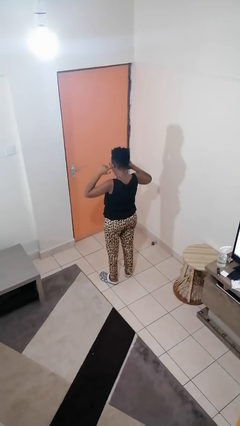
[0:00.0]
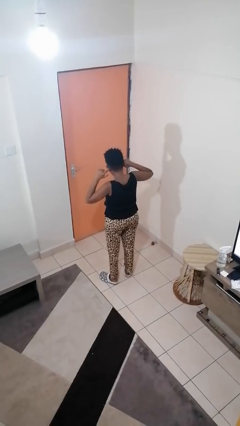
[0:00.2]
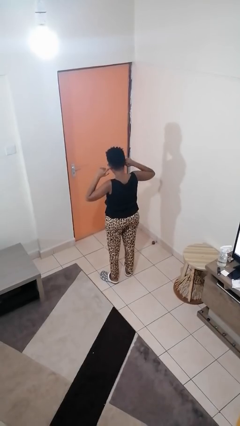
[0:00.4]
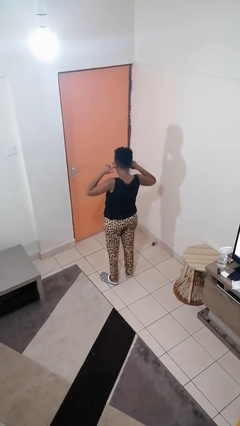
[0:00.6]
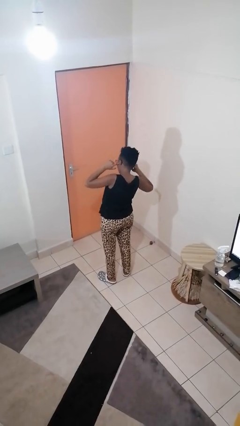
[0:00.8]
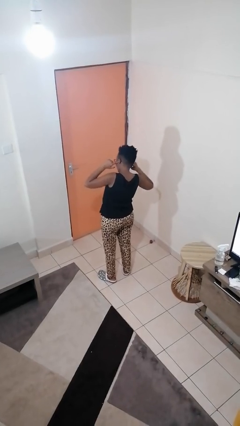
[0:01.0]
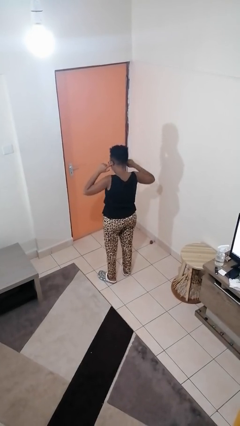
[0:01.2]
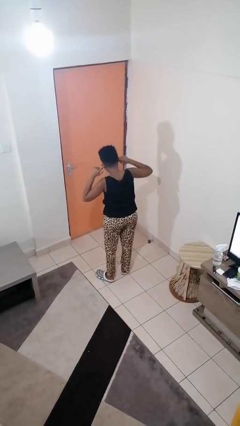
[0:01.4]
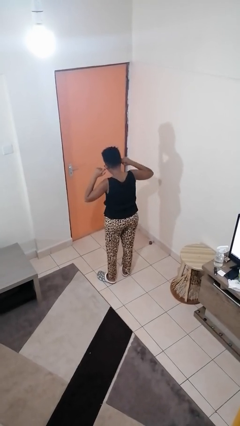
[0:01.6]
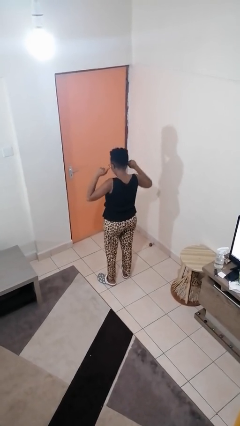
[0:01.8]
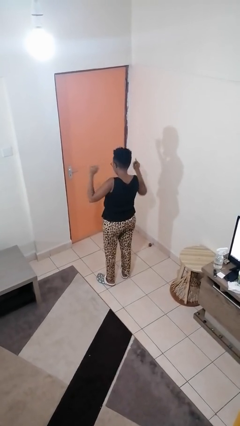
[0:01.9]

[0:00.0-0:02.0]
person puts fingers in ear

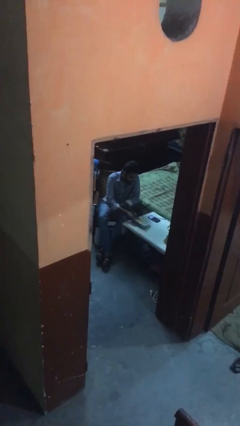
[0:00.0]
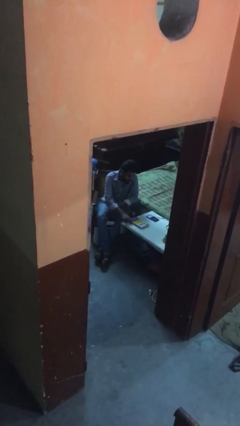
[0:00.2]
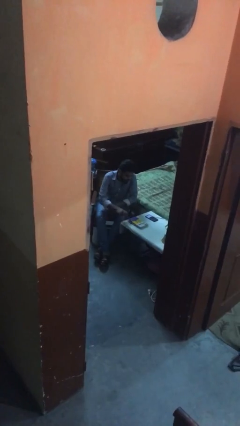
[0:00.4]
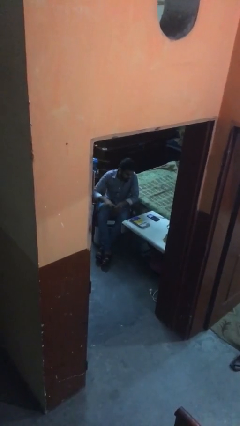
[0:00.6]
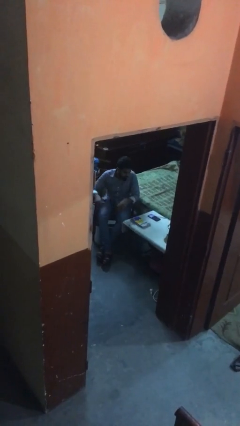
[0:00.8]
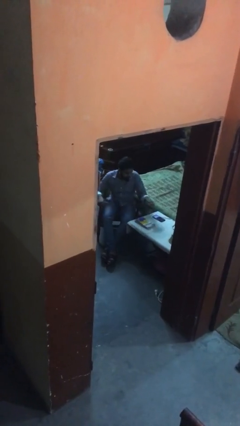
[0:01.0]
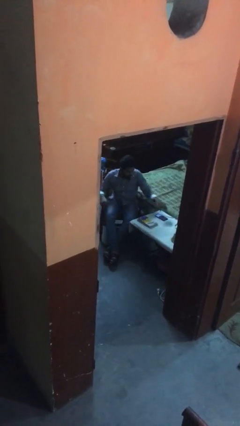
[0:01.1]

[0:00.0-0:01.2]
person puts down object on table

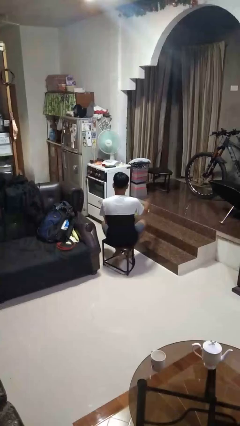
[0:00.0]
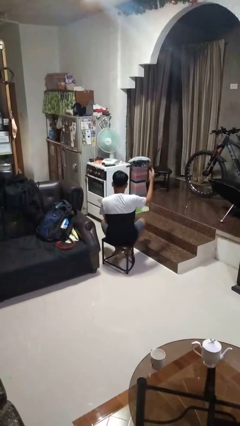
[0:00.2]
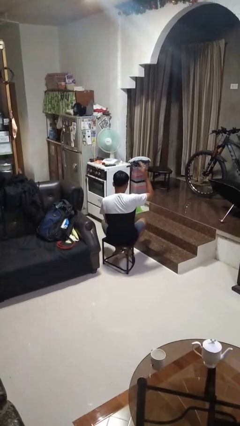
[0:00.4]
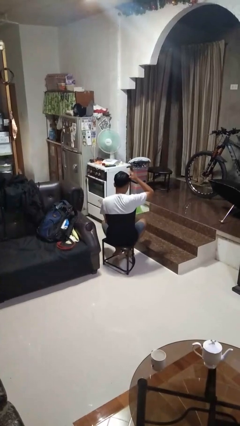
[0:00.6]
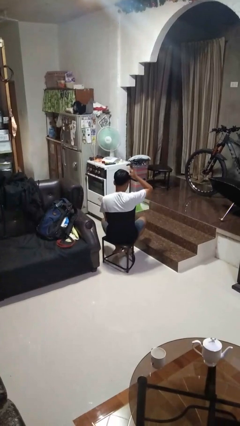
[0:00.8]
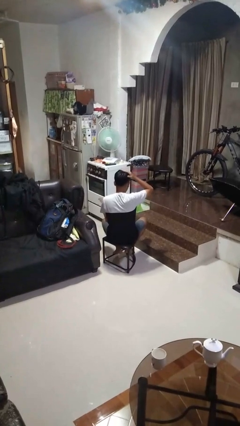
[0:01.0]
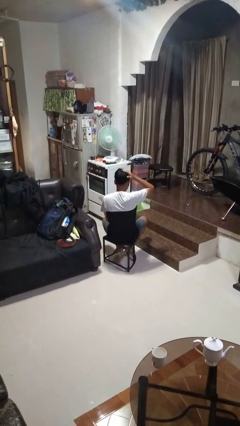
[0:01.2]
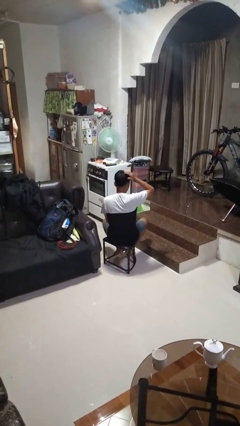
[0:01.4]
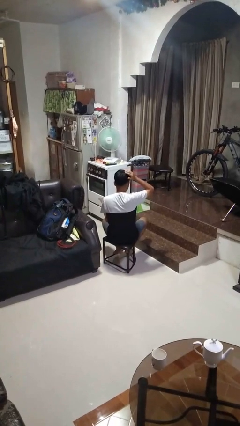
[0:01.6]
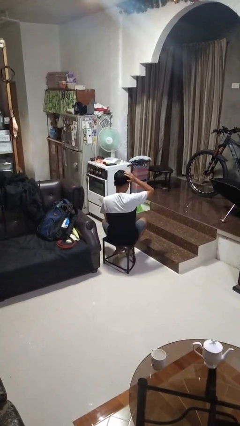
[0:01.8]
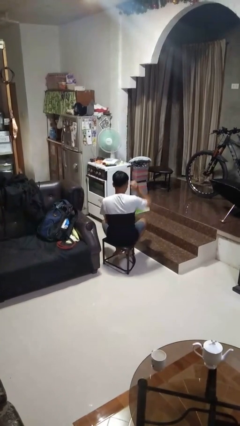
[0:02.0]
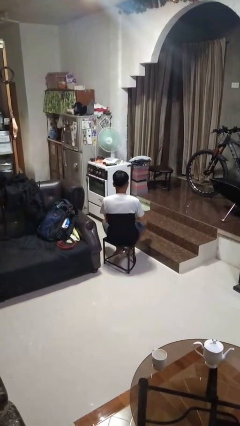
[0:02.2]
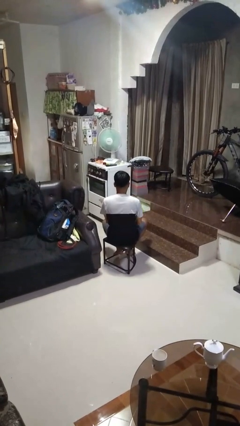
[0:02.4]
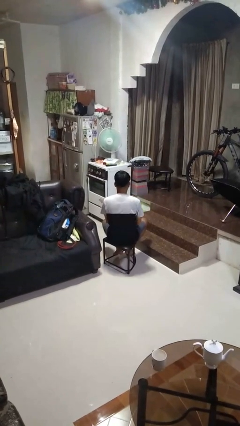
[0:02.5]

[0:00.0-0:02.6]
person pats head

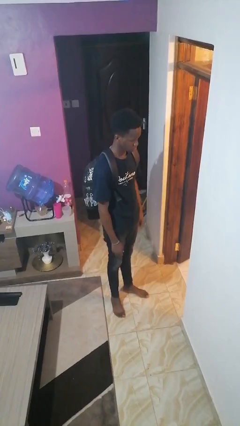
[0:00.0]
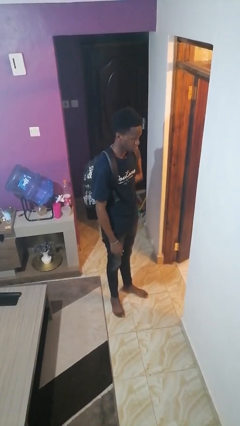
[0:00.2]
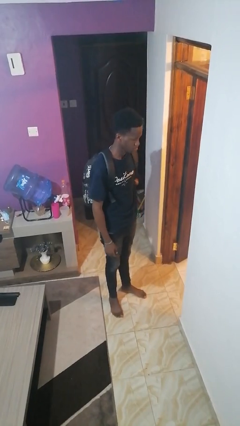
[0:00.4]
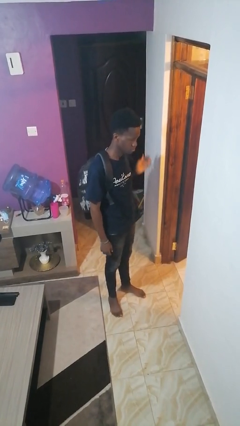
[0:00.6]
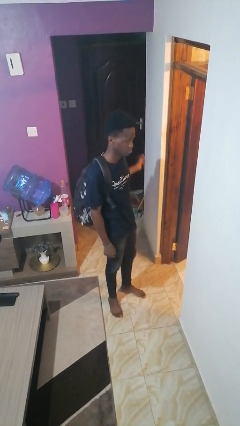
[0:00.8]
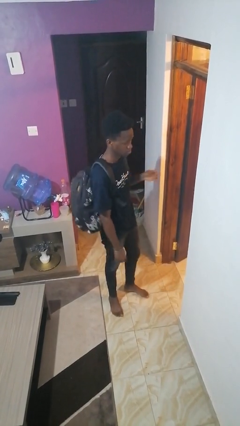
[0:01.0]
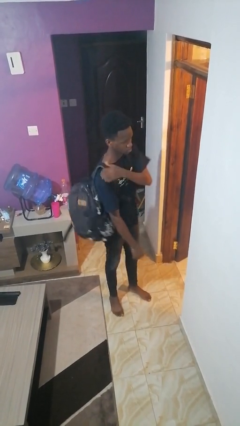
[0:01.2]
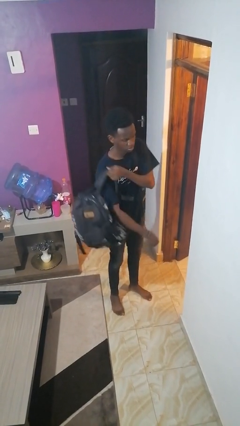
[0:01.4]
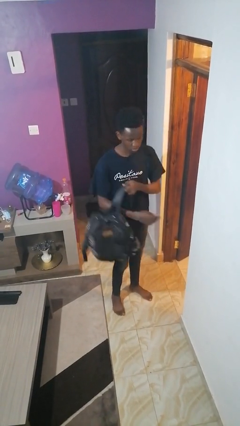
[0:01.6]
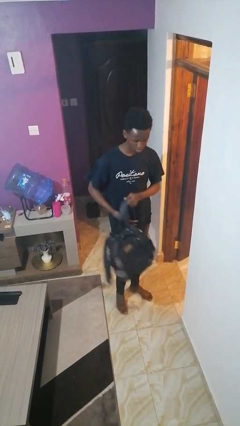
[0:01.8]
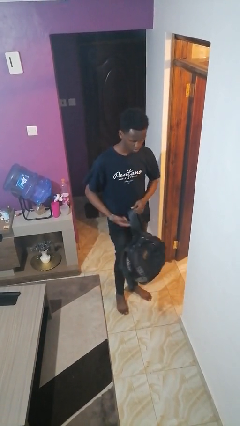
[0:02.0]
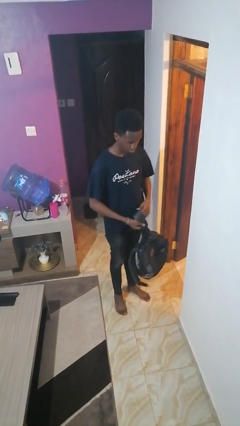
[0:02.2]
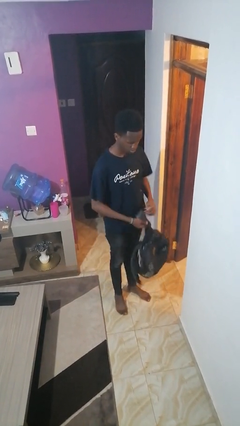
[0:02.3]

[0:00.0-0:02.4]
person takes off backpack

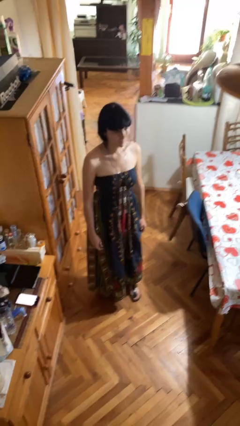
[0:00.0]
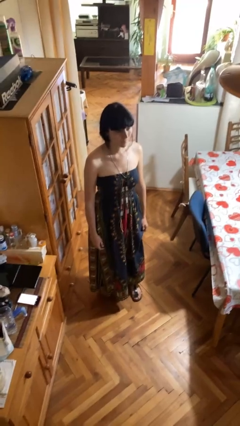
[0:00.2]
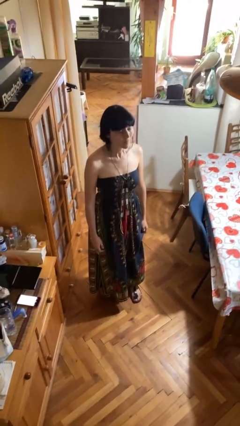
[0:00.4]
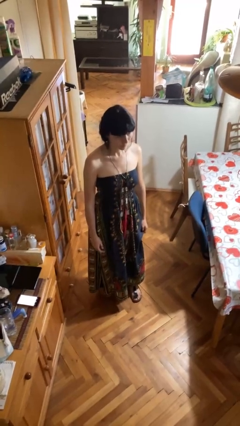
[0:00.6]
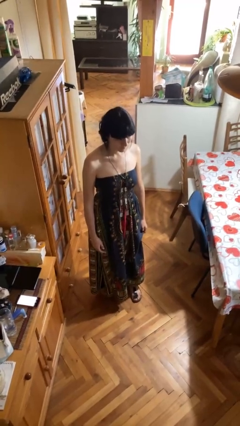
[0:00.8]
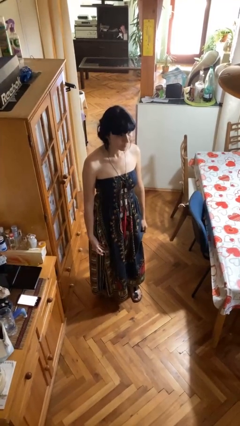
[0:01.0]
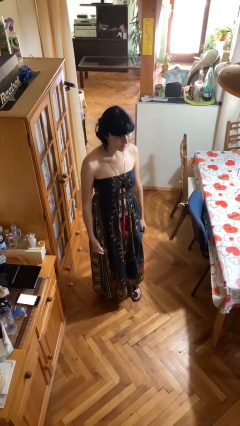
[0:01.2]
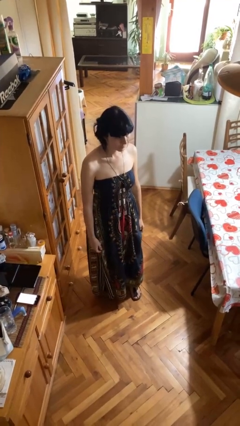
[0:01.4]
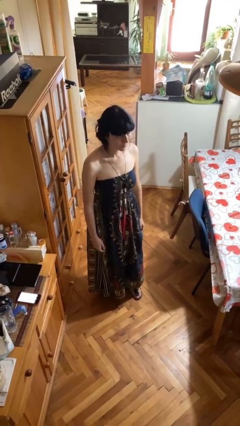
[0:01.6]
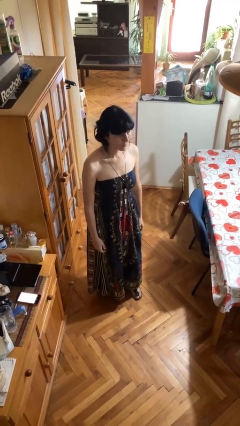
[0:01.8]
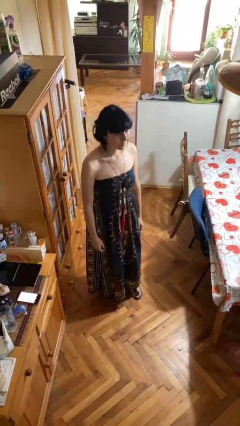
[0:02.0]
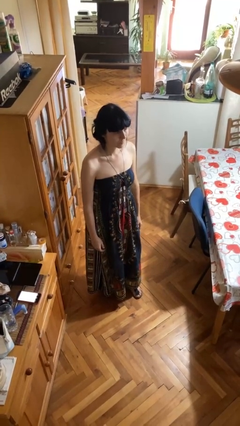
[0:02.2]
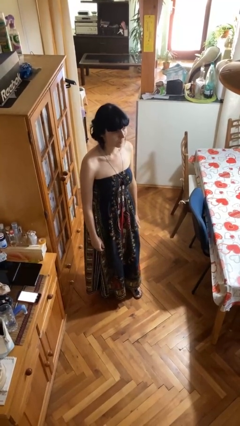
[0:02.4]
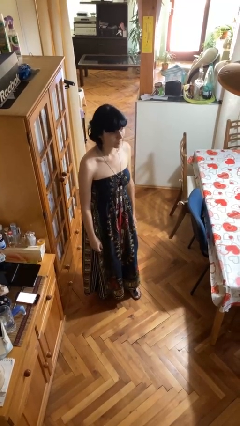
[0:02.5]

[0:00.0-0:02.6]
person nods head

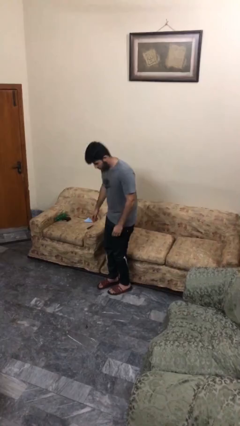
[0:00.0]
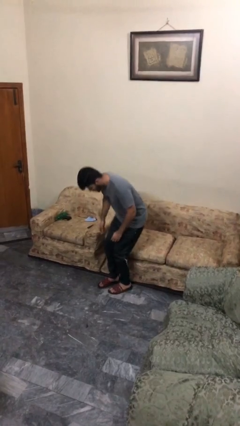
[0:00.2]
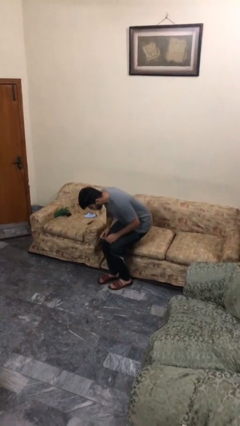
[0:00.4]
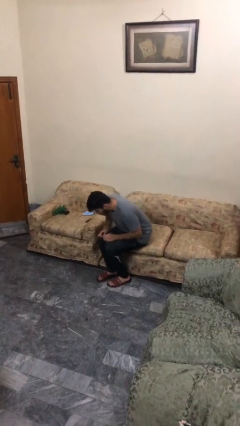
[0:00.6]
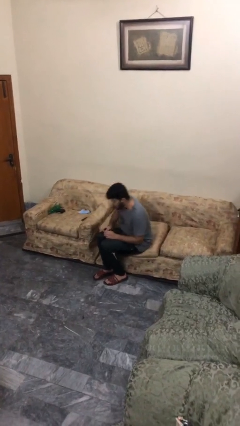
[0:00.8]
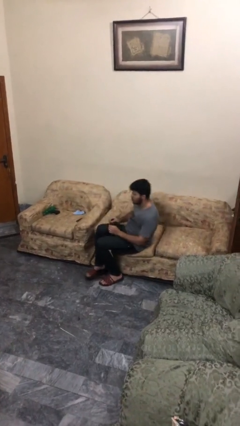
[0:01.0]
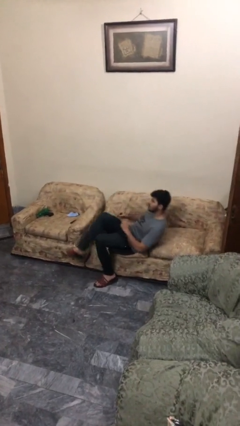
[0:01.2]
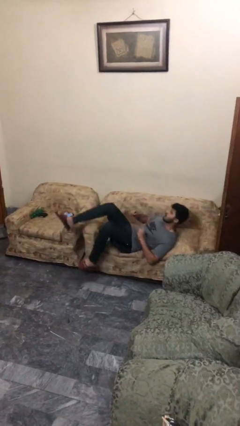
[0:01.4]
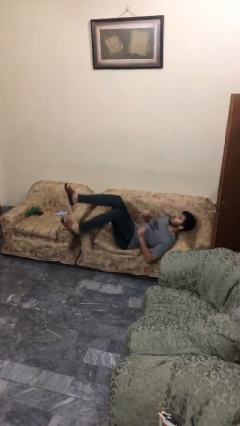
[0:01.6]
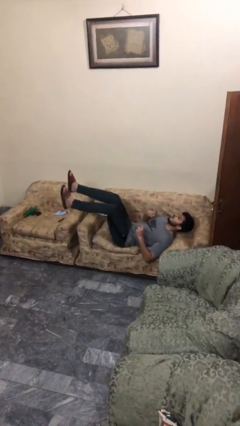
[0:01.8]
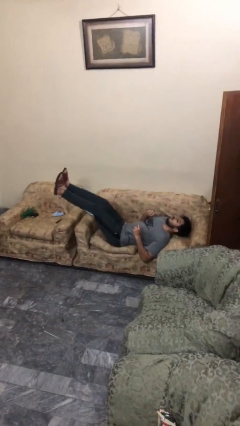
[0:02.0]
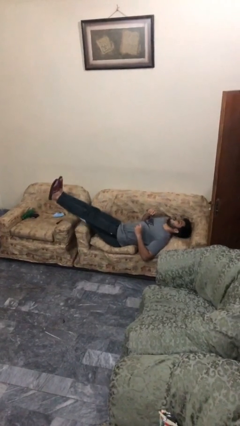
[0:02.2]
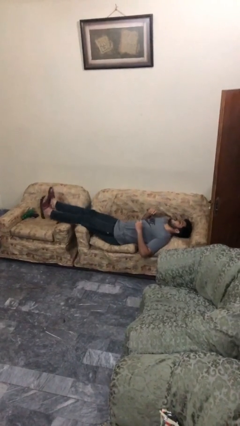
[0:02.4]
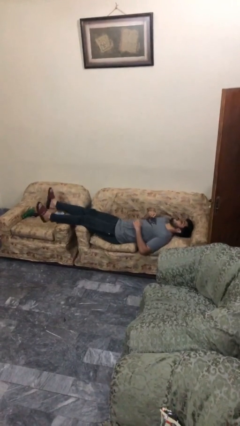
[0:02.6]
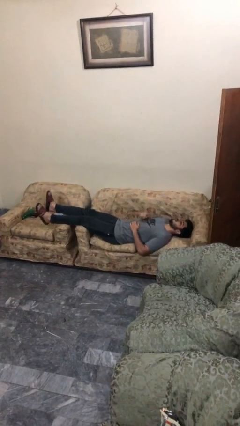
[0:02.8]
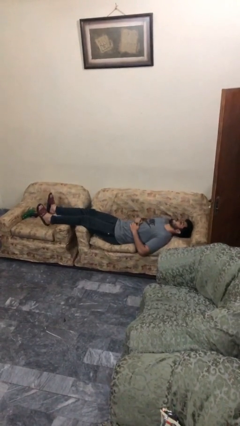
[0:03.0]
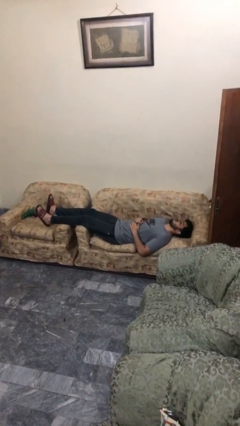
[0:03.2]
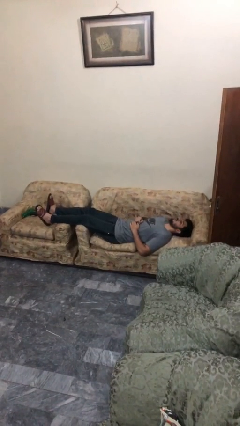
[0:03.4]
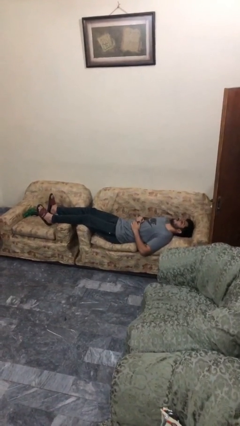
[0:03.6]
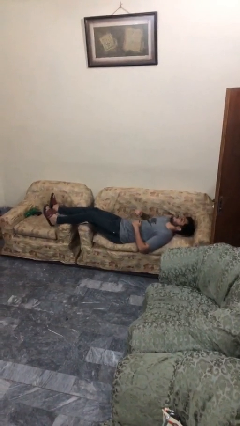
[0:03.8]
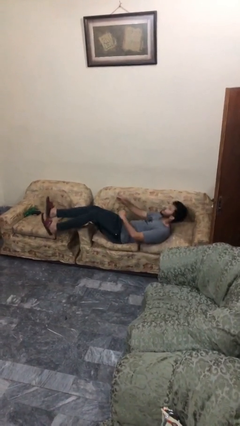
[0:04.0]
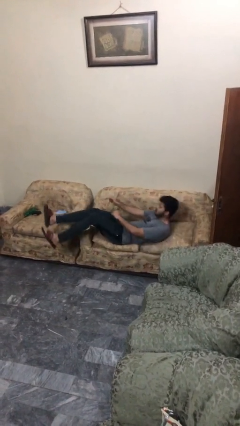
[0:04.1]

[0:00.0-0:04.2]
person lies down on couch

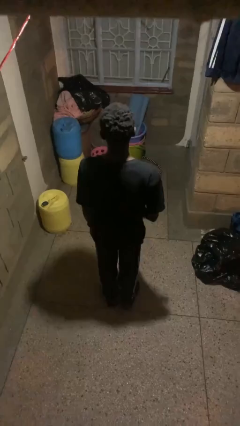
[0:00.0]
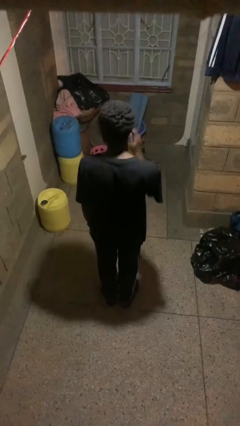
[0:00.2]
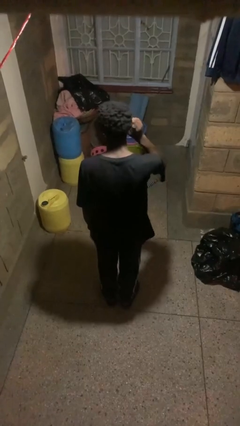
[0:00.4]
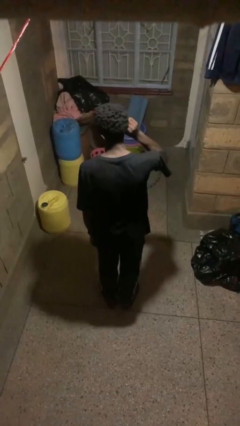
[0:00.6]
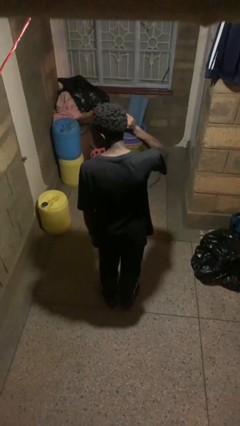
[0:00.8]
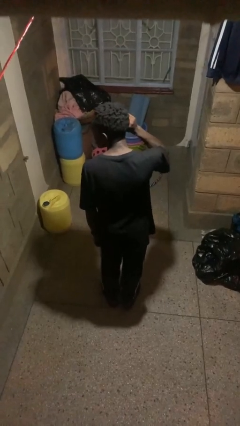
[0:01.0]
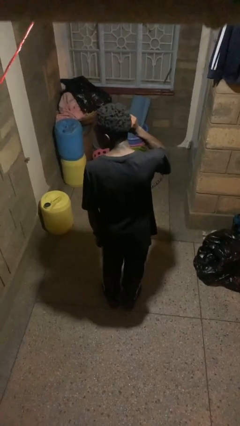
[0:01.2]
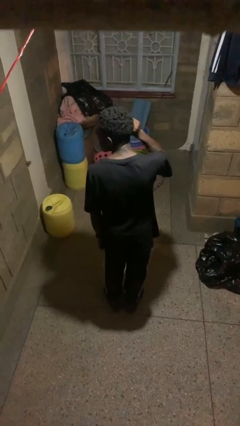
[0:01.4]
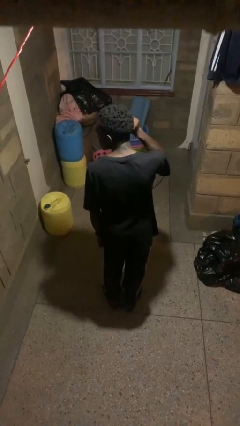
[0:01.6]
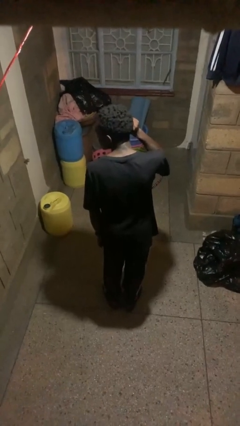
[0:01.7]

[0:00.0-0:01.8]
person touches earlobe

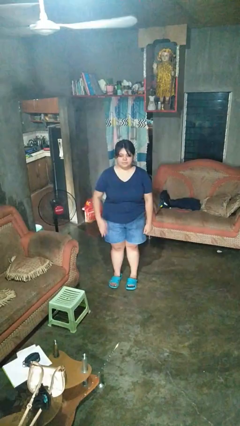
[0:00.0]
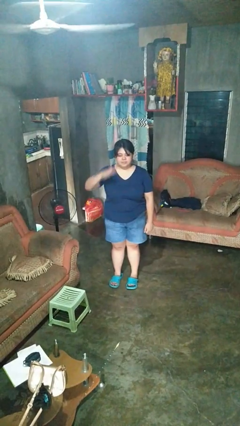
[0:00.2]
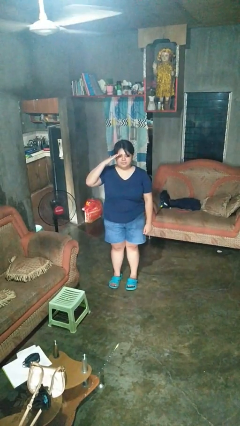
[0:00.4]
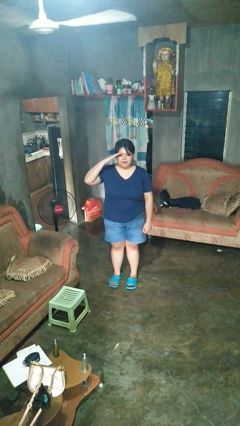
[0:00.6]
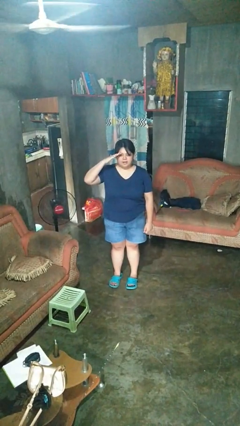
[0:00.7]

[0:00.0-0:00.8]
person salutes
